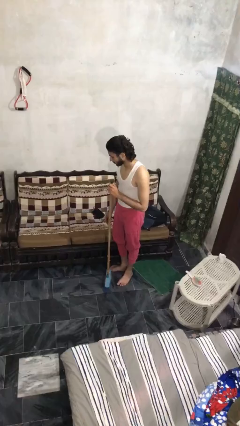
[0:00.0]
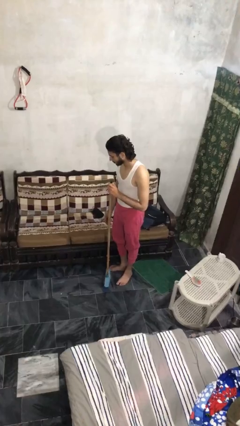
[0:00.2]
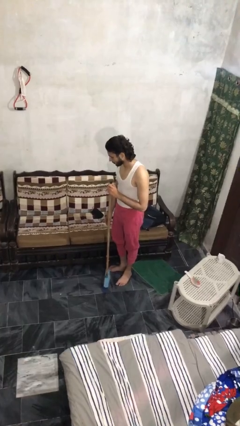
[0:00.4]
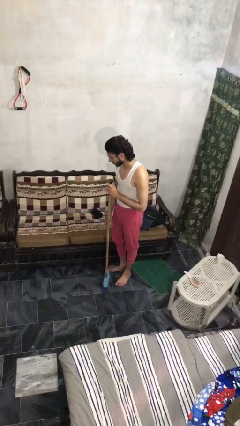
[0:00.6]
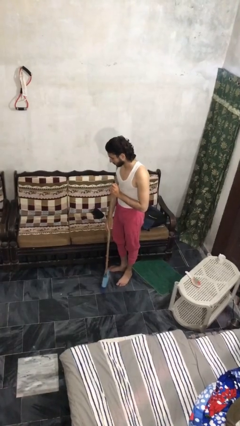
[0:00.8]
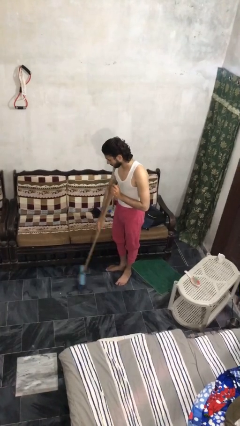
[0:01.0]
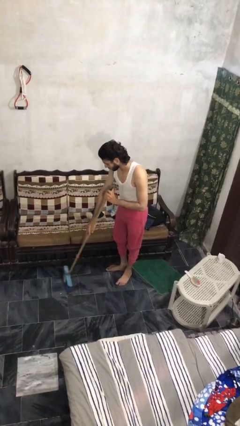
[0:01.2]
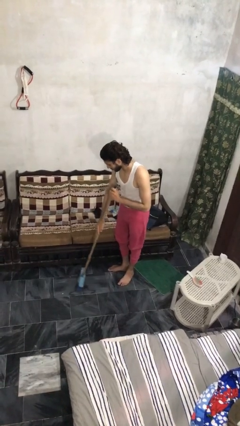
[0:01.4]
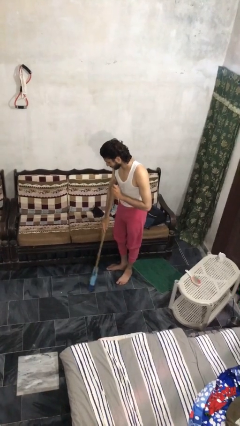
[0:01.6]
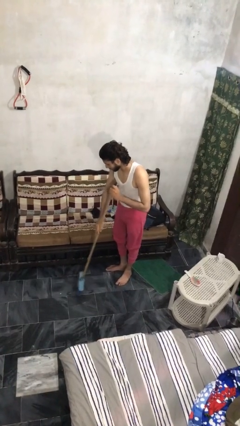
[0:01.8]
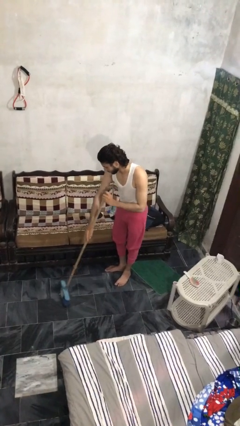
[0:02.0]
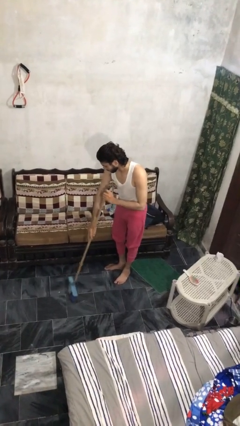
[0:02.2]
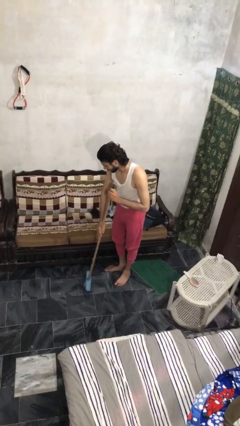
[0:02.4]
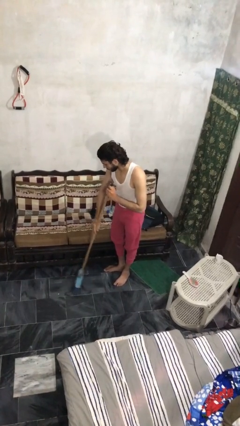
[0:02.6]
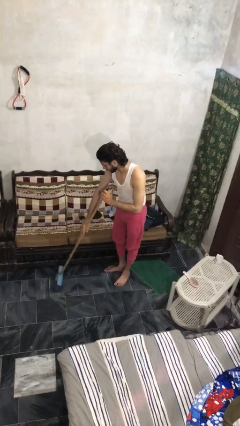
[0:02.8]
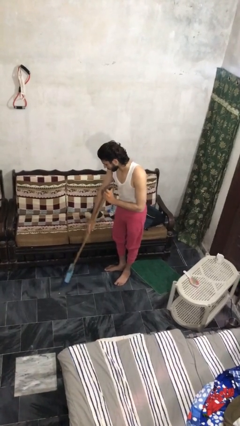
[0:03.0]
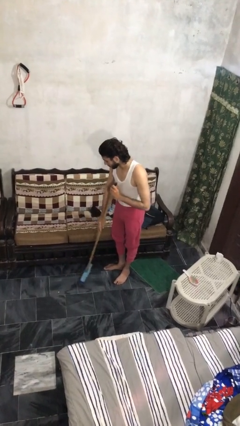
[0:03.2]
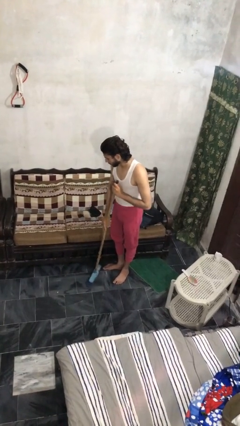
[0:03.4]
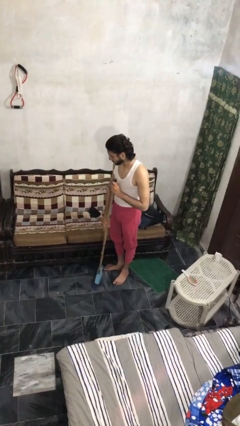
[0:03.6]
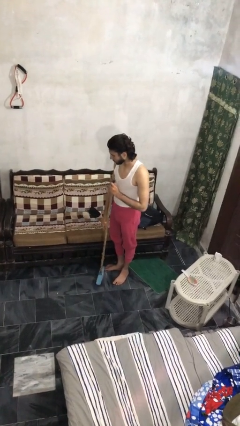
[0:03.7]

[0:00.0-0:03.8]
person sweeps floor

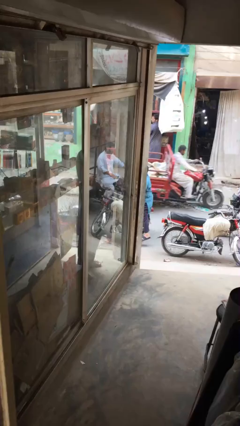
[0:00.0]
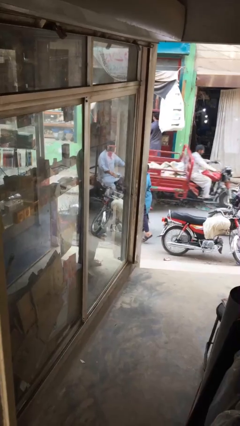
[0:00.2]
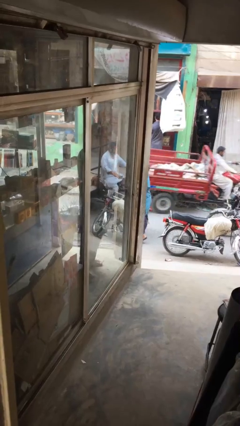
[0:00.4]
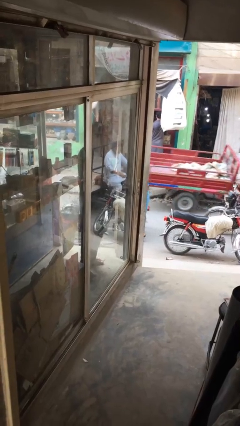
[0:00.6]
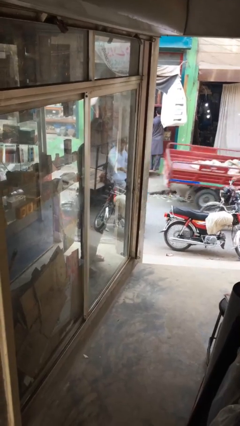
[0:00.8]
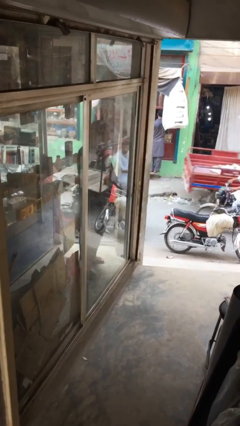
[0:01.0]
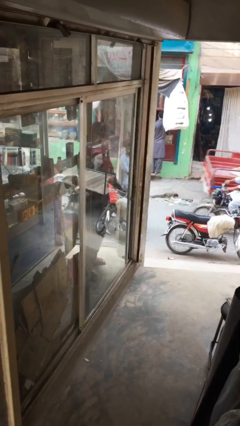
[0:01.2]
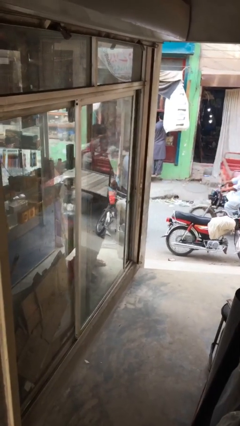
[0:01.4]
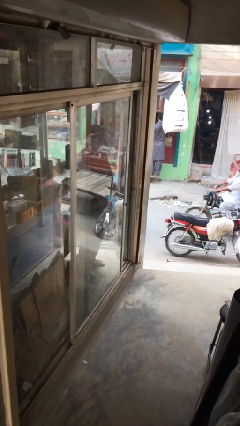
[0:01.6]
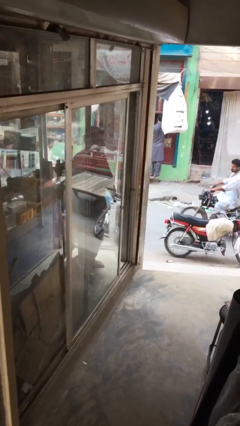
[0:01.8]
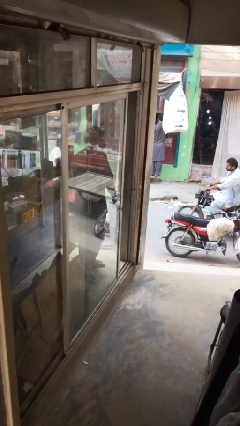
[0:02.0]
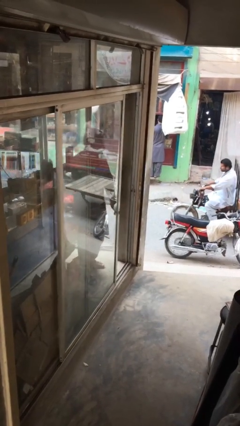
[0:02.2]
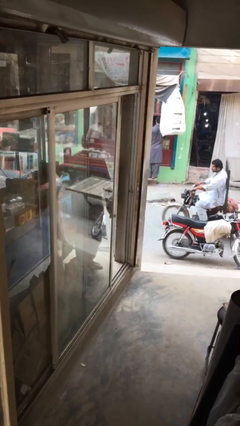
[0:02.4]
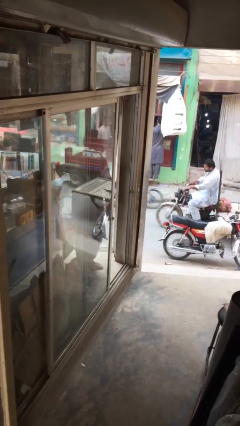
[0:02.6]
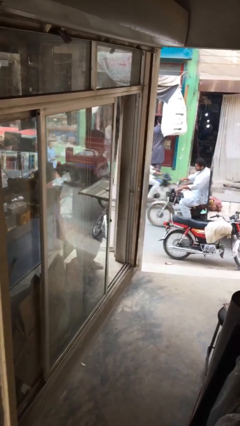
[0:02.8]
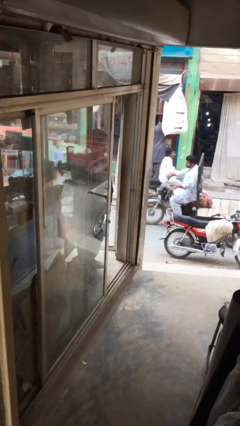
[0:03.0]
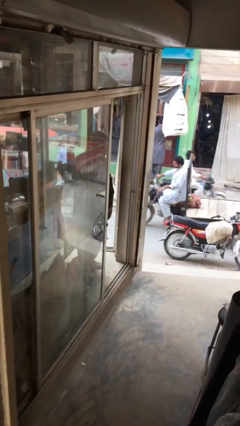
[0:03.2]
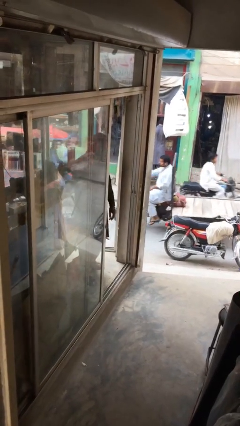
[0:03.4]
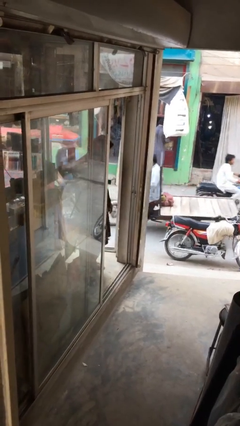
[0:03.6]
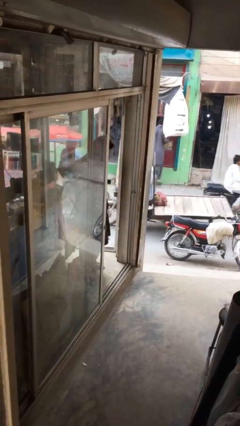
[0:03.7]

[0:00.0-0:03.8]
person opens facility door

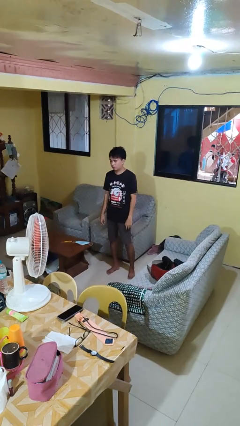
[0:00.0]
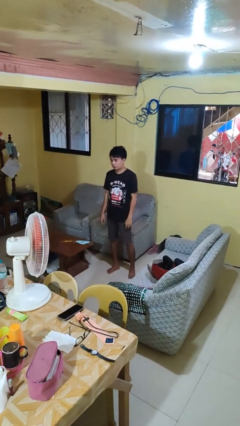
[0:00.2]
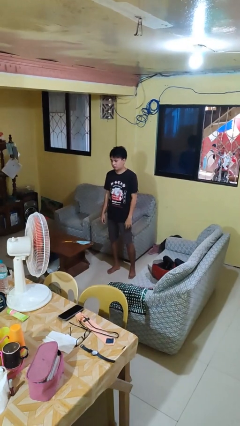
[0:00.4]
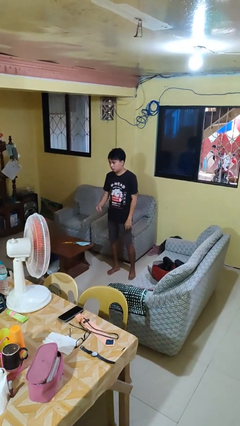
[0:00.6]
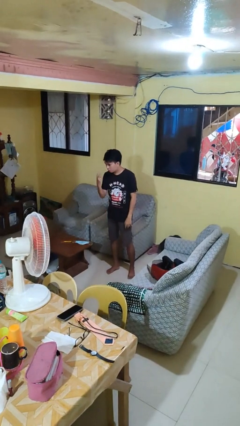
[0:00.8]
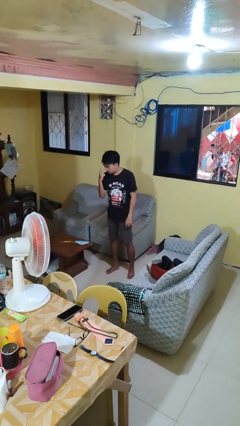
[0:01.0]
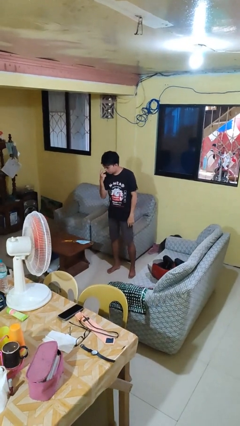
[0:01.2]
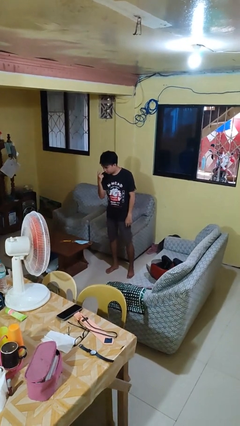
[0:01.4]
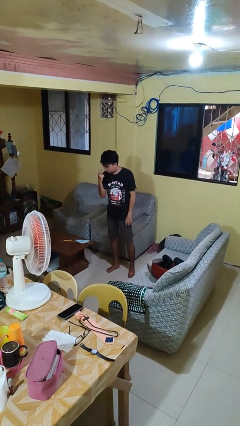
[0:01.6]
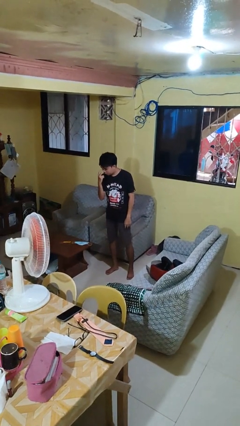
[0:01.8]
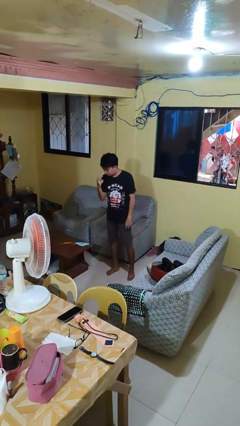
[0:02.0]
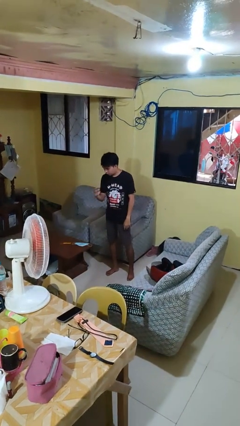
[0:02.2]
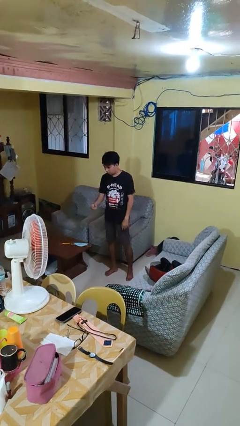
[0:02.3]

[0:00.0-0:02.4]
person gestures watch closely

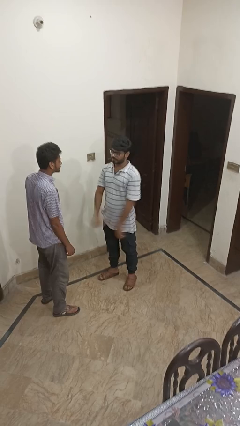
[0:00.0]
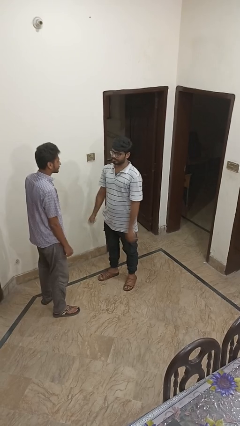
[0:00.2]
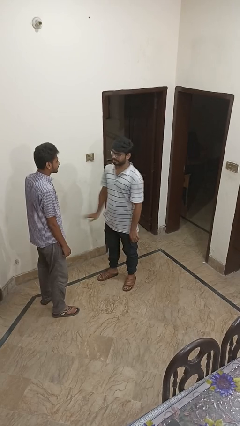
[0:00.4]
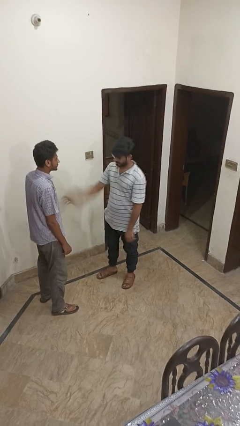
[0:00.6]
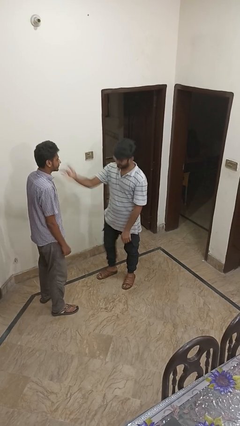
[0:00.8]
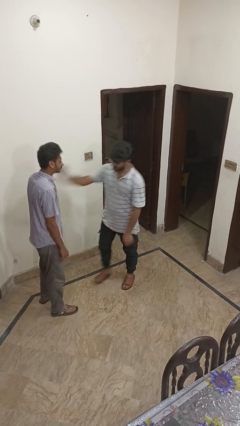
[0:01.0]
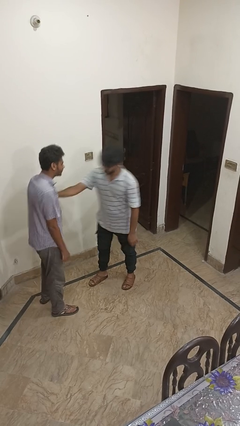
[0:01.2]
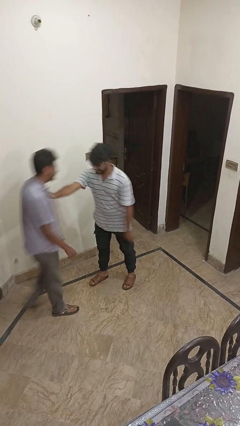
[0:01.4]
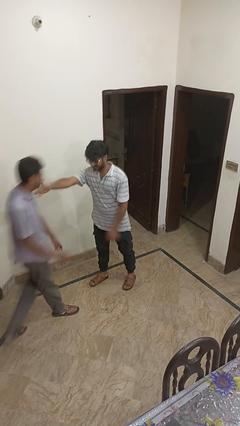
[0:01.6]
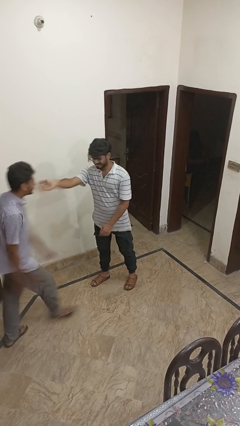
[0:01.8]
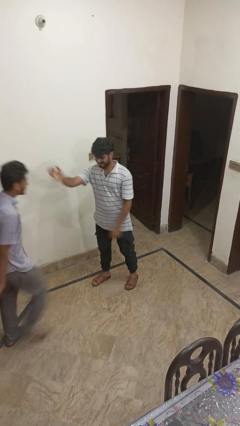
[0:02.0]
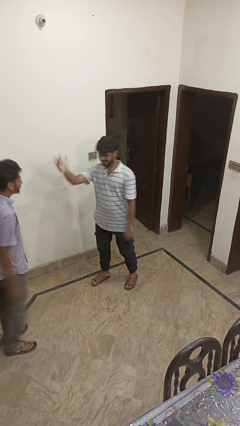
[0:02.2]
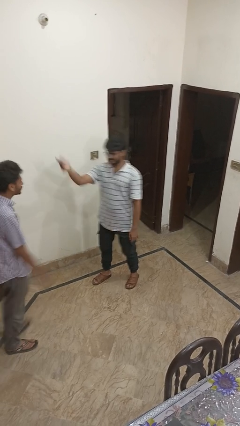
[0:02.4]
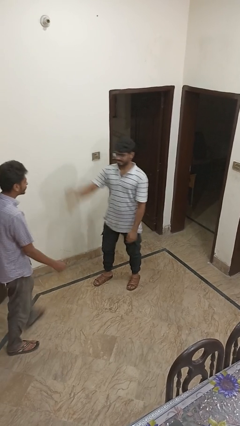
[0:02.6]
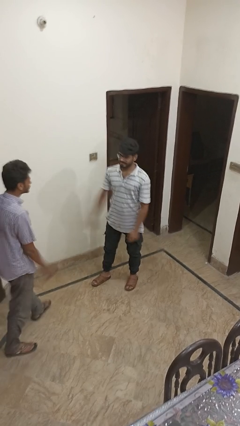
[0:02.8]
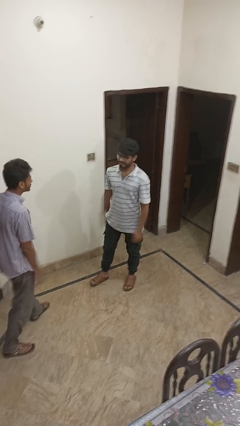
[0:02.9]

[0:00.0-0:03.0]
person shoves person

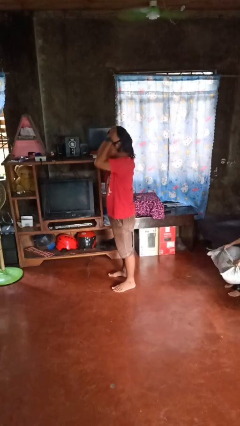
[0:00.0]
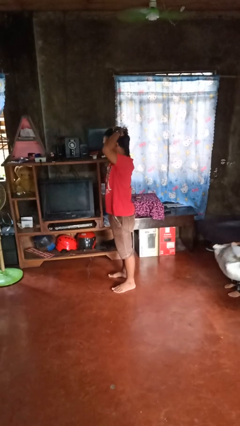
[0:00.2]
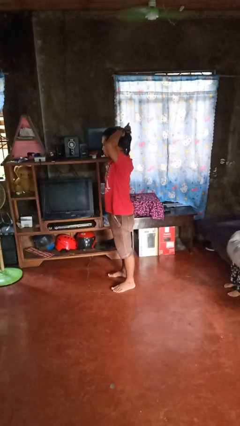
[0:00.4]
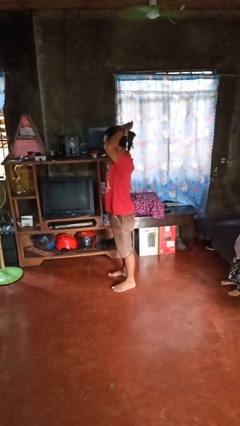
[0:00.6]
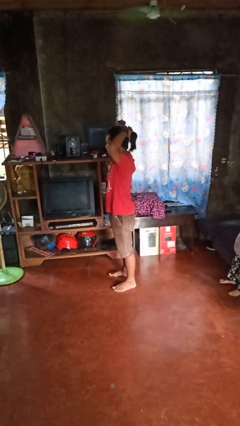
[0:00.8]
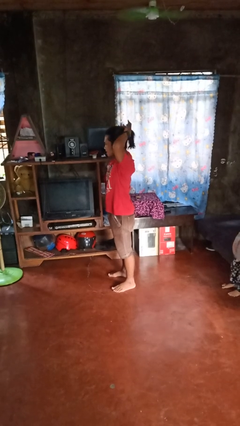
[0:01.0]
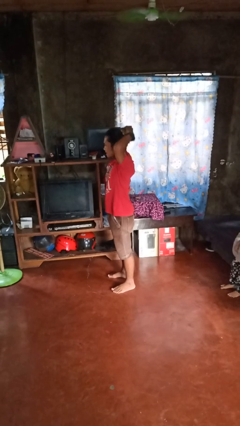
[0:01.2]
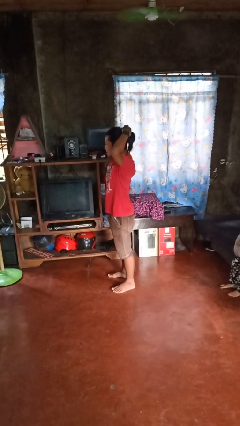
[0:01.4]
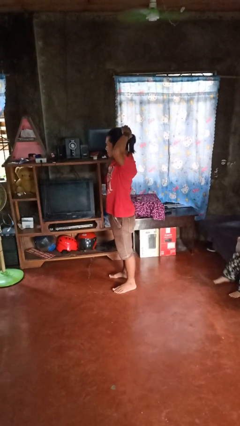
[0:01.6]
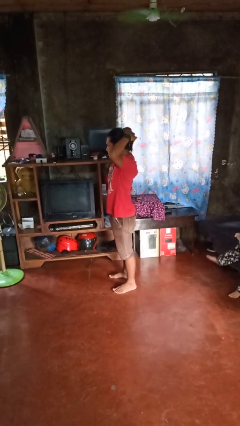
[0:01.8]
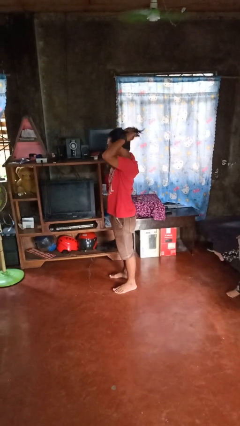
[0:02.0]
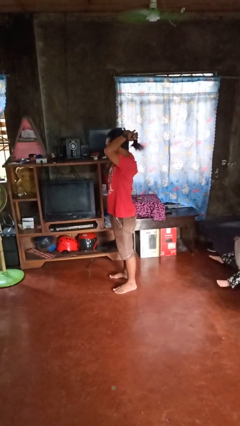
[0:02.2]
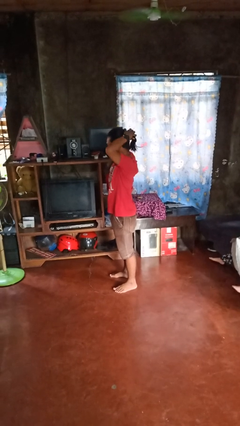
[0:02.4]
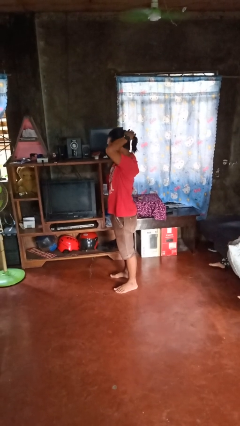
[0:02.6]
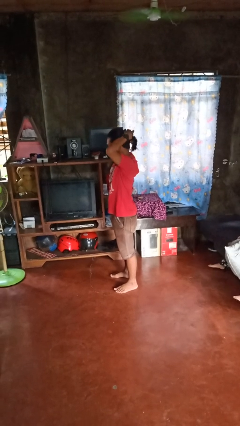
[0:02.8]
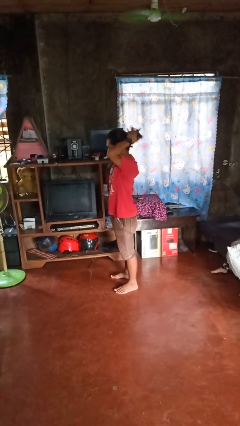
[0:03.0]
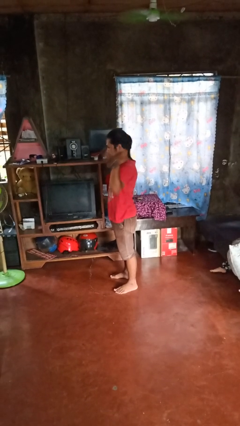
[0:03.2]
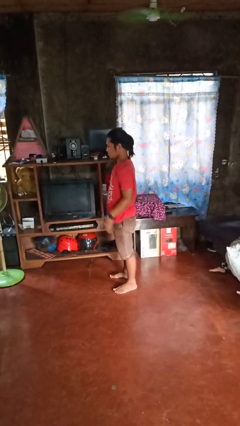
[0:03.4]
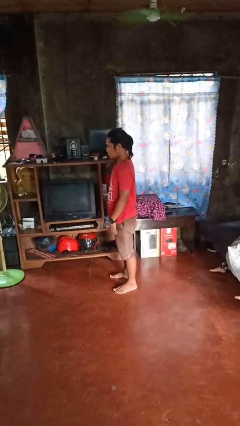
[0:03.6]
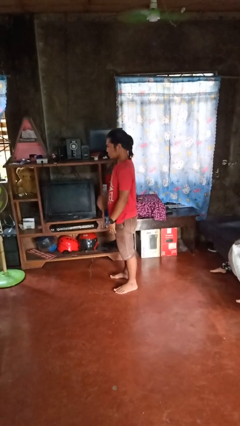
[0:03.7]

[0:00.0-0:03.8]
person puts hair in ponytail

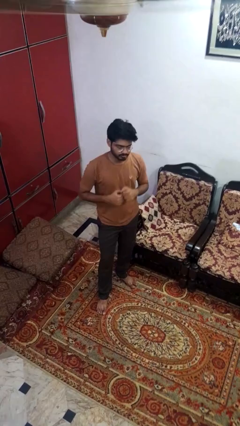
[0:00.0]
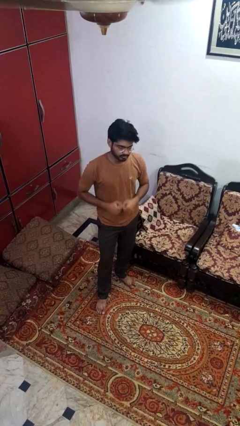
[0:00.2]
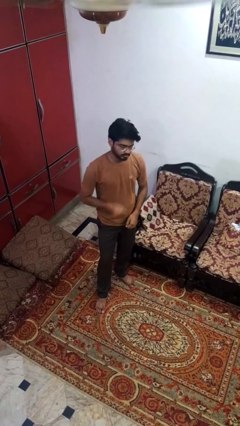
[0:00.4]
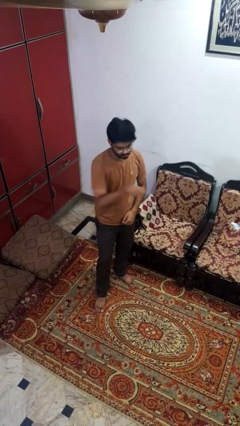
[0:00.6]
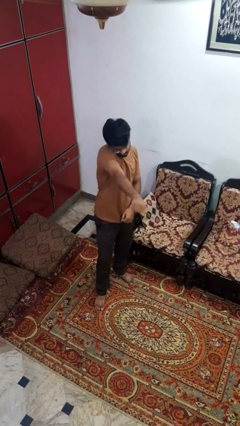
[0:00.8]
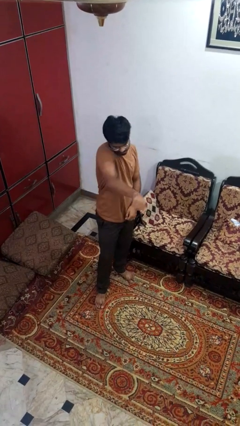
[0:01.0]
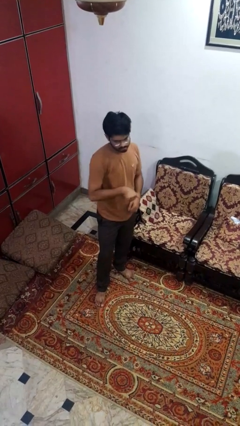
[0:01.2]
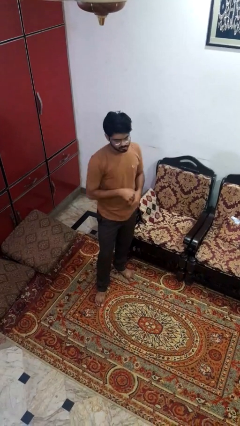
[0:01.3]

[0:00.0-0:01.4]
person punches
